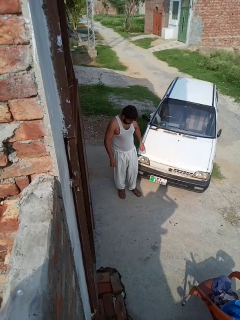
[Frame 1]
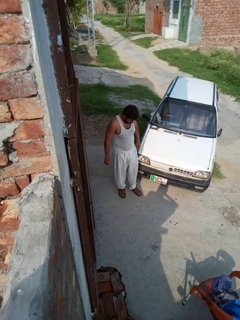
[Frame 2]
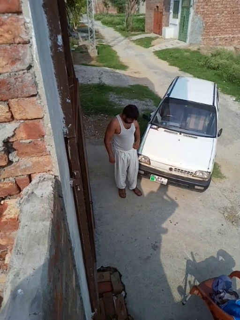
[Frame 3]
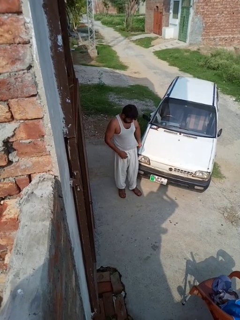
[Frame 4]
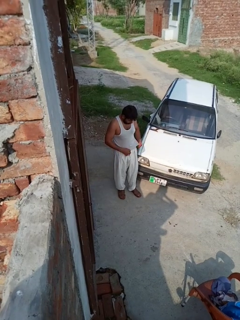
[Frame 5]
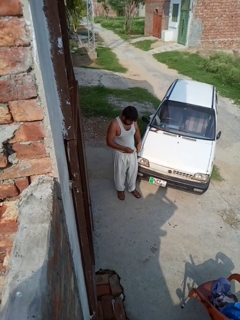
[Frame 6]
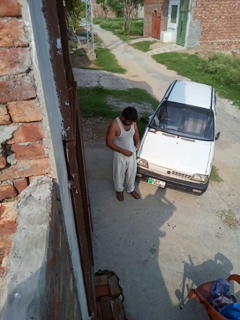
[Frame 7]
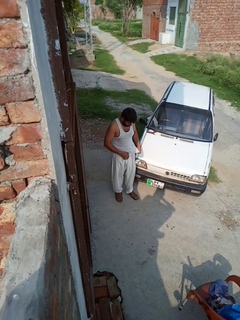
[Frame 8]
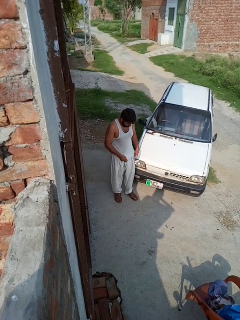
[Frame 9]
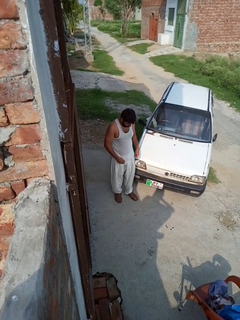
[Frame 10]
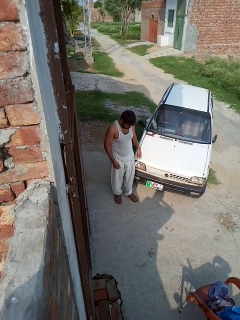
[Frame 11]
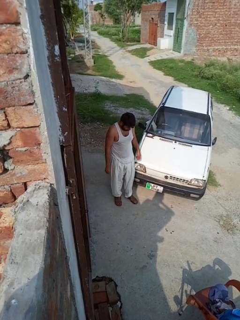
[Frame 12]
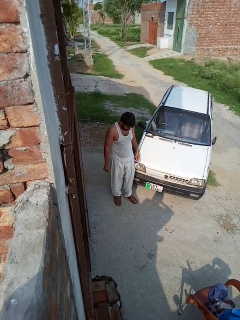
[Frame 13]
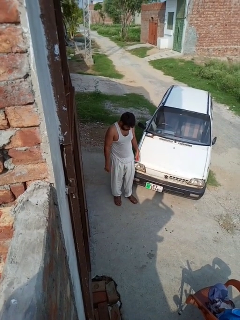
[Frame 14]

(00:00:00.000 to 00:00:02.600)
person untucks shirt

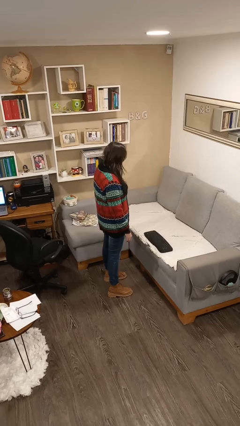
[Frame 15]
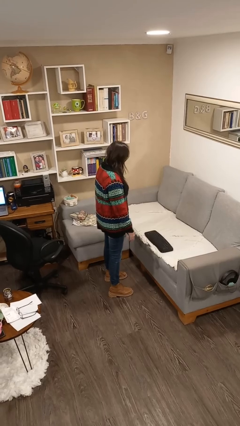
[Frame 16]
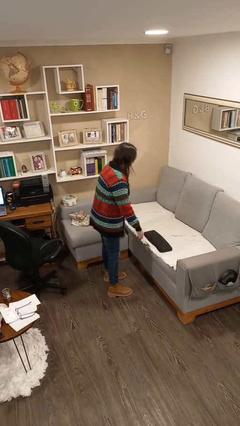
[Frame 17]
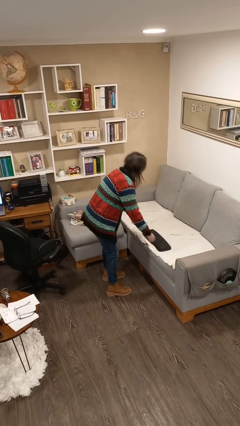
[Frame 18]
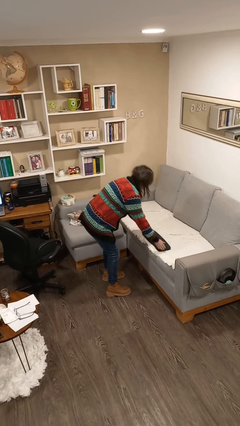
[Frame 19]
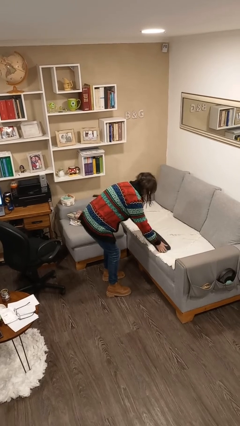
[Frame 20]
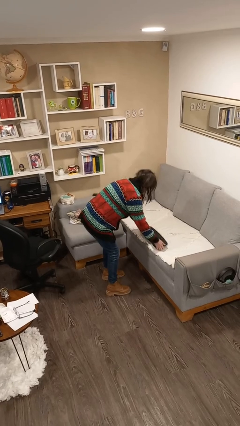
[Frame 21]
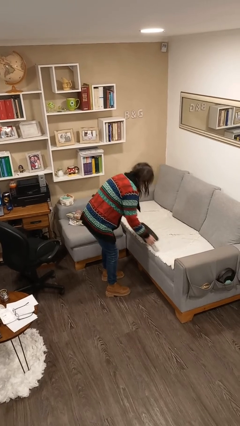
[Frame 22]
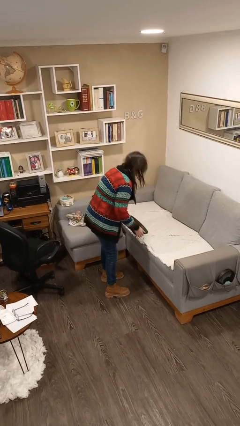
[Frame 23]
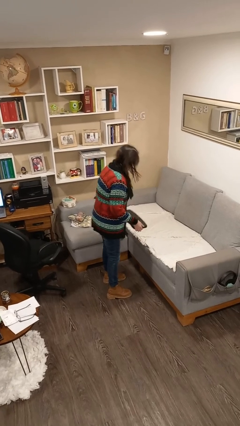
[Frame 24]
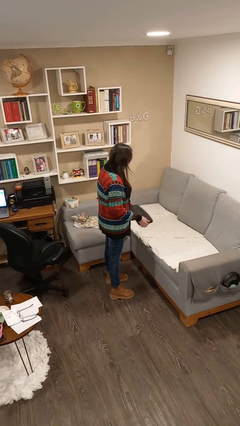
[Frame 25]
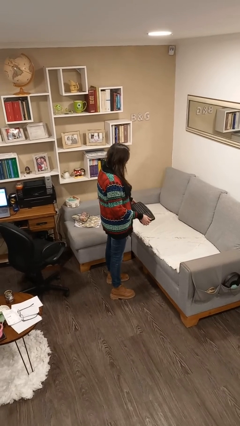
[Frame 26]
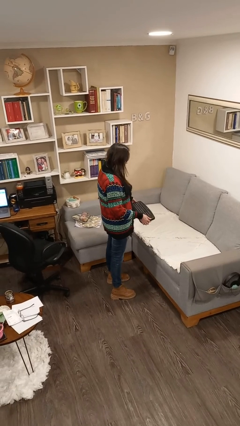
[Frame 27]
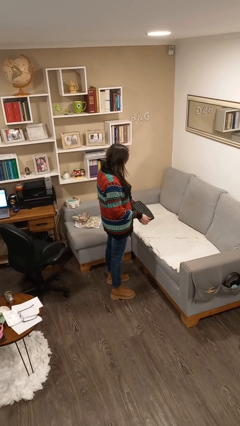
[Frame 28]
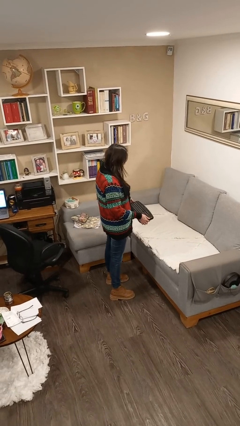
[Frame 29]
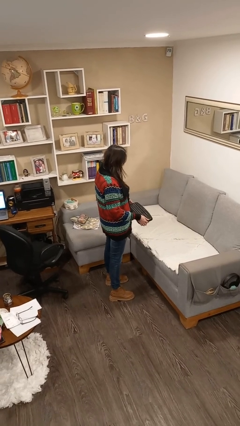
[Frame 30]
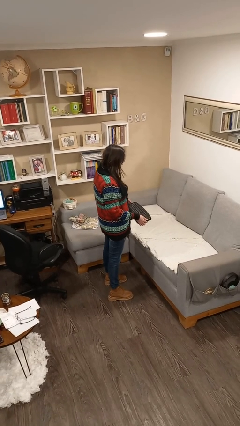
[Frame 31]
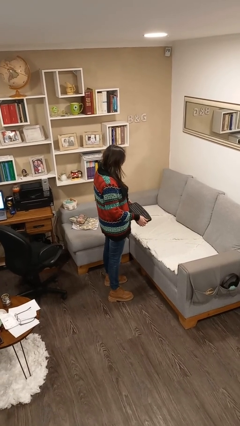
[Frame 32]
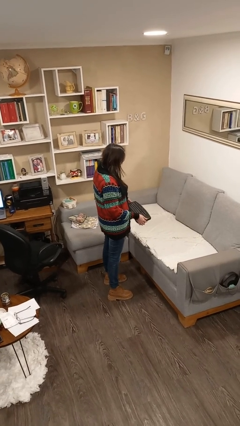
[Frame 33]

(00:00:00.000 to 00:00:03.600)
person picks up object from couch

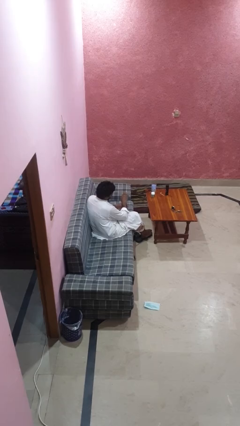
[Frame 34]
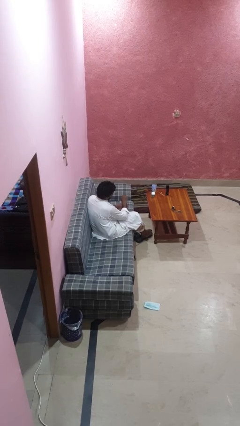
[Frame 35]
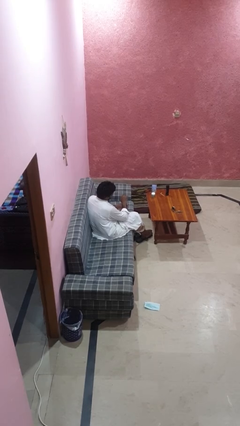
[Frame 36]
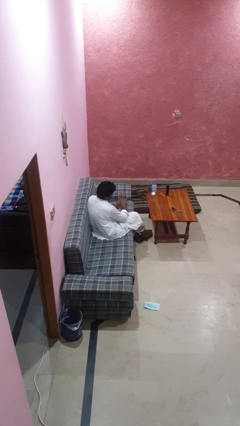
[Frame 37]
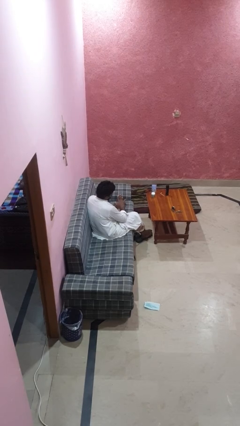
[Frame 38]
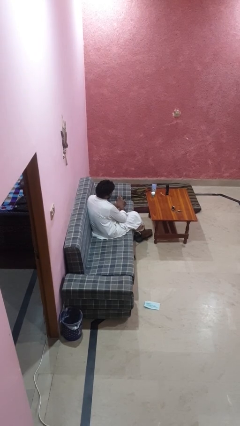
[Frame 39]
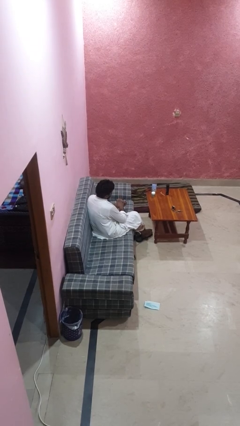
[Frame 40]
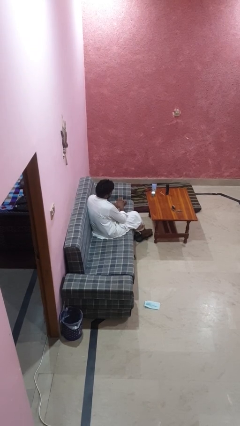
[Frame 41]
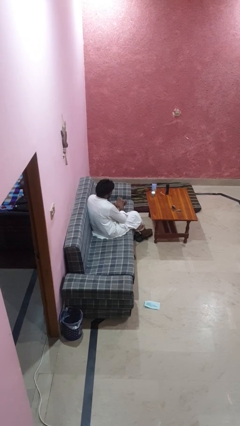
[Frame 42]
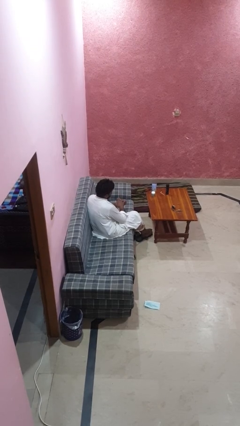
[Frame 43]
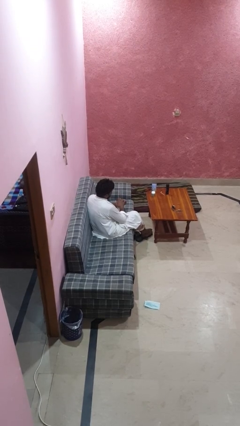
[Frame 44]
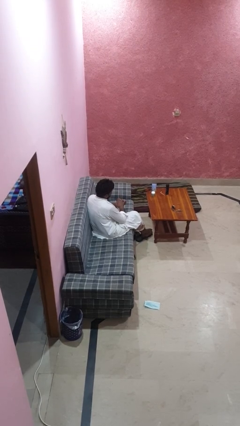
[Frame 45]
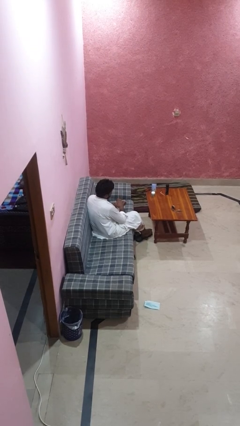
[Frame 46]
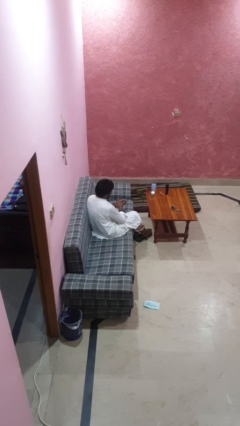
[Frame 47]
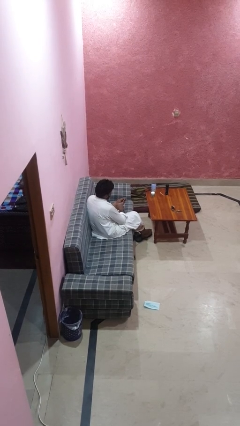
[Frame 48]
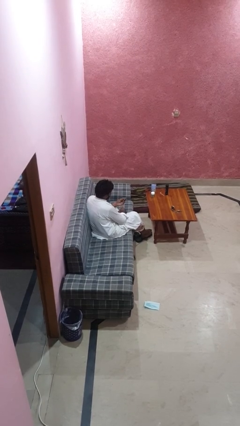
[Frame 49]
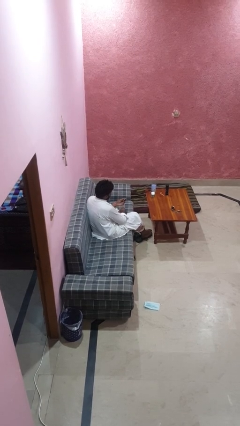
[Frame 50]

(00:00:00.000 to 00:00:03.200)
person takes off ring

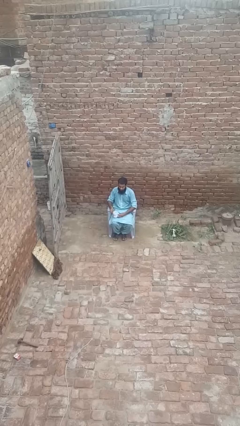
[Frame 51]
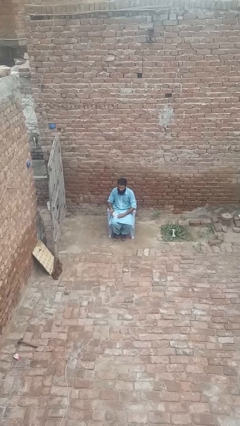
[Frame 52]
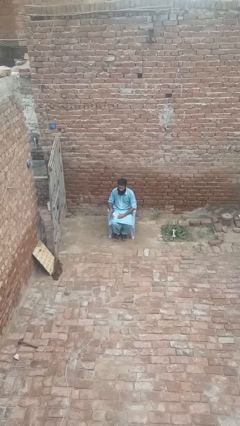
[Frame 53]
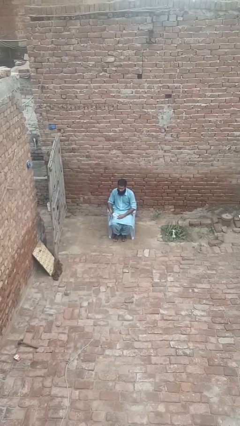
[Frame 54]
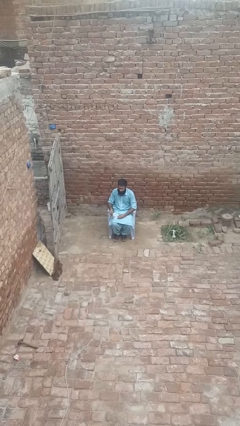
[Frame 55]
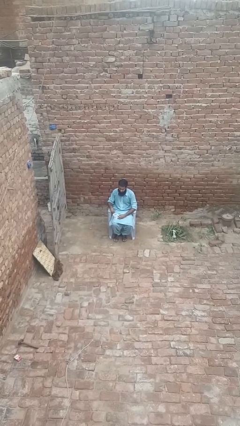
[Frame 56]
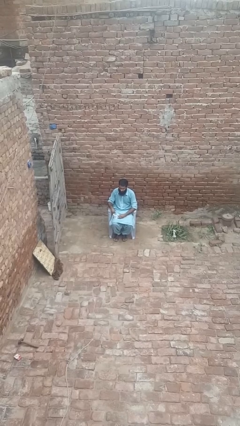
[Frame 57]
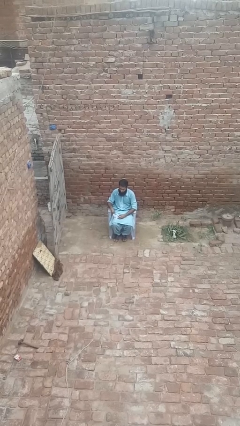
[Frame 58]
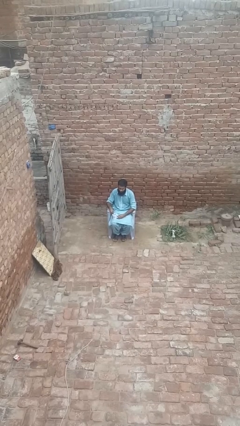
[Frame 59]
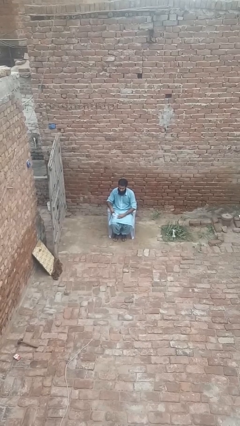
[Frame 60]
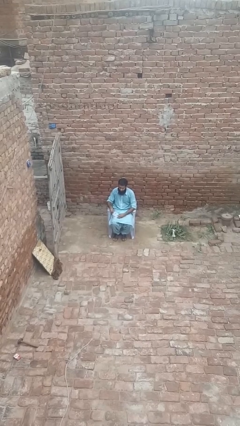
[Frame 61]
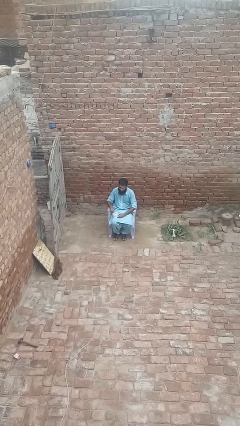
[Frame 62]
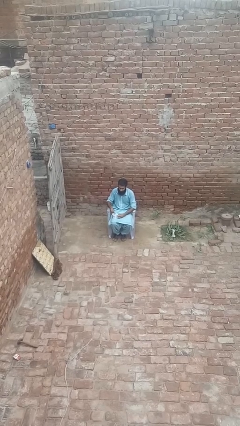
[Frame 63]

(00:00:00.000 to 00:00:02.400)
person stirs mug

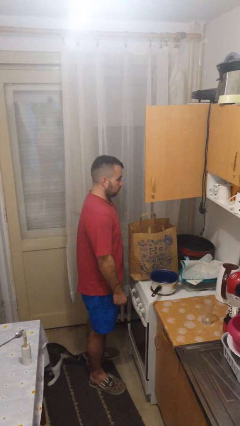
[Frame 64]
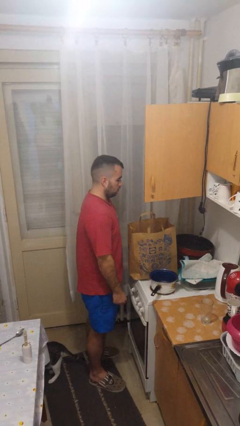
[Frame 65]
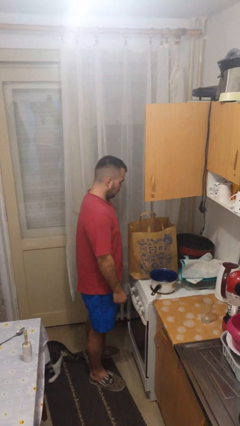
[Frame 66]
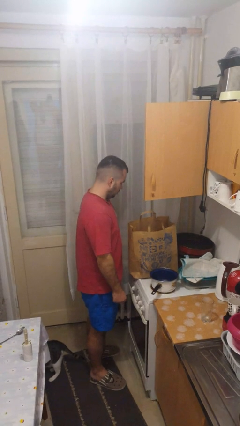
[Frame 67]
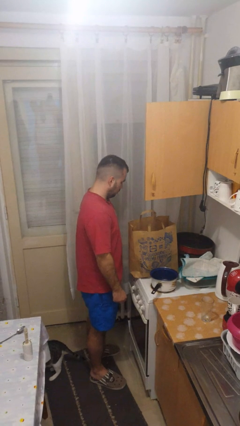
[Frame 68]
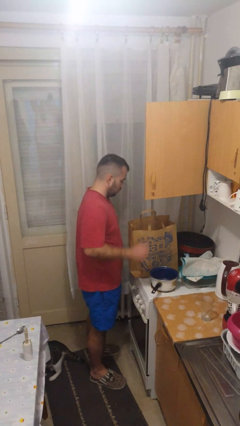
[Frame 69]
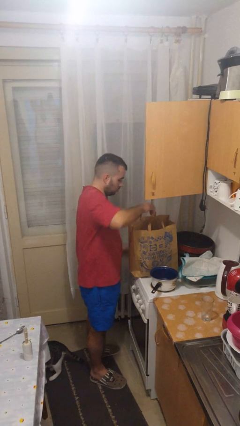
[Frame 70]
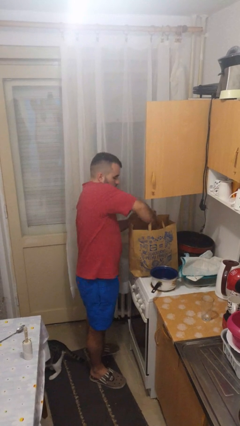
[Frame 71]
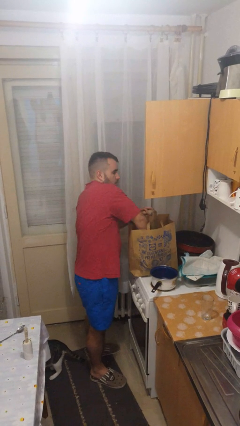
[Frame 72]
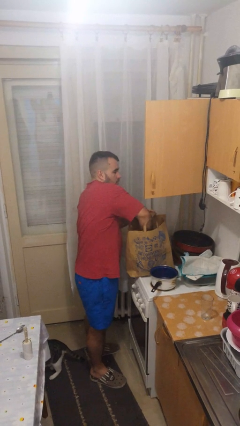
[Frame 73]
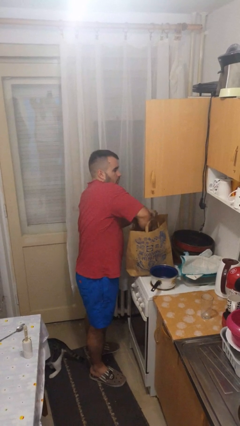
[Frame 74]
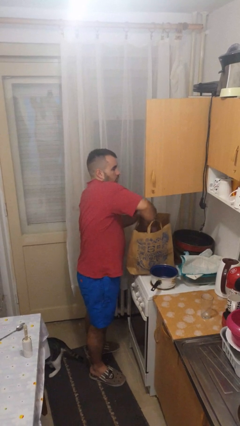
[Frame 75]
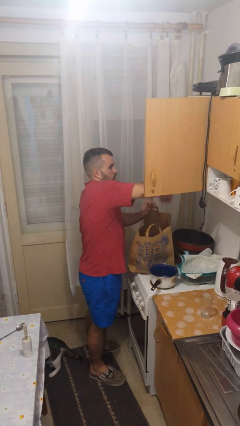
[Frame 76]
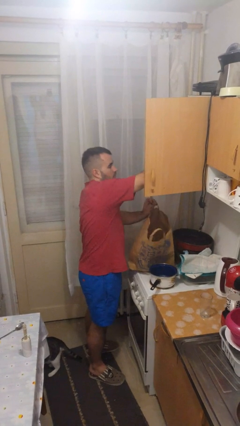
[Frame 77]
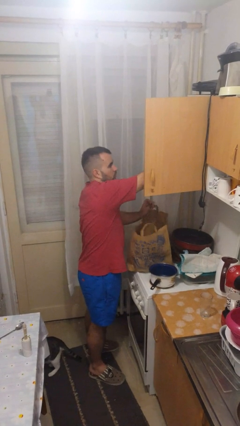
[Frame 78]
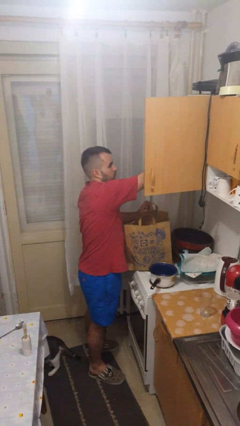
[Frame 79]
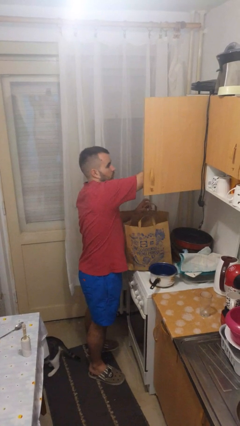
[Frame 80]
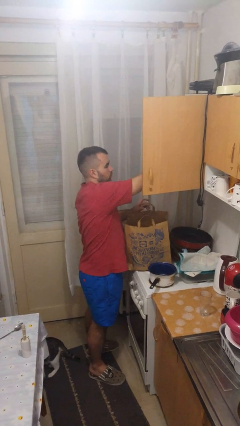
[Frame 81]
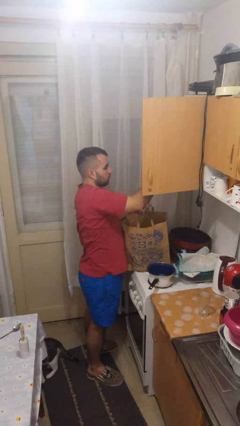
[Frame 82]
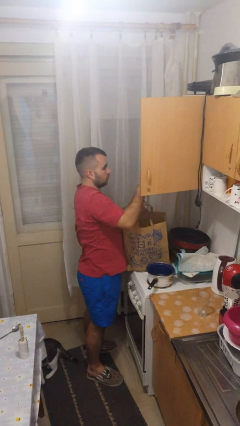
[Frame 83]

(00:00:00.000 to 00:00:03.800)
person loads groceries into cabinet

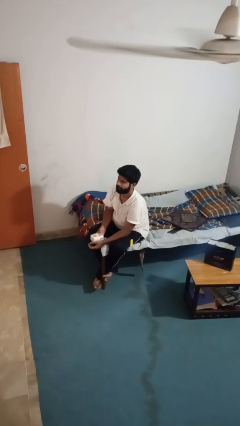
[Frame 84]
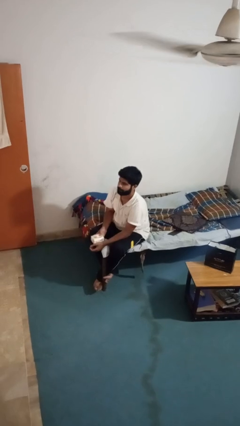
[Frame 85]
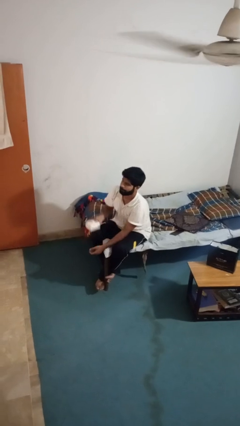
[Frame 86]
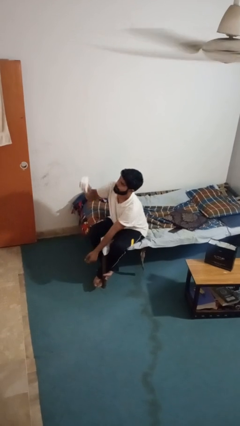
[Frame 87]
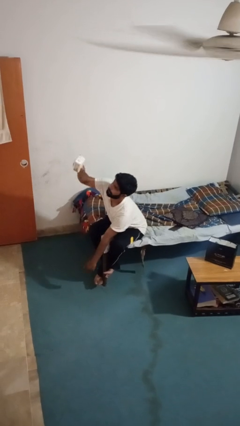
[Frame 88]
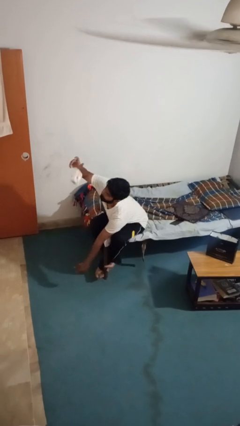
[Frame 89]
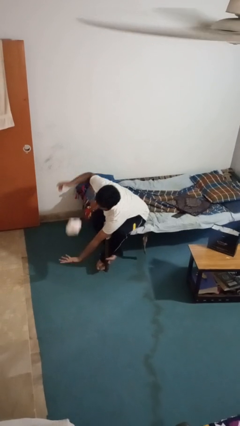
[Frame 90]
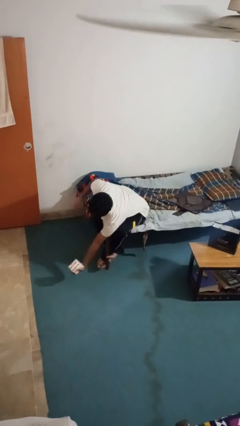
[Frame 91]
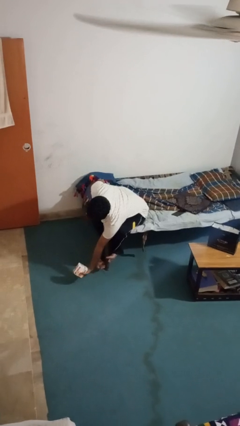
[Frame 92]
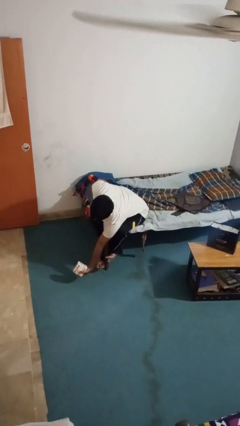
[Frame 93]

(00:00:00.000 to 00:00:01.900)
person drops object

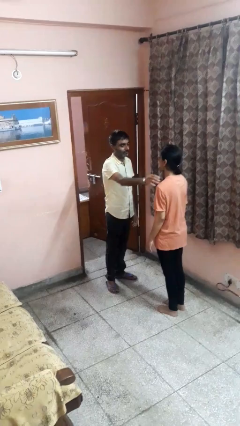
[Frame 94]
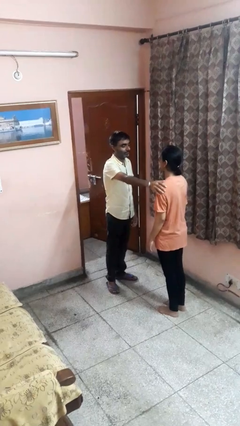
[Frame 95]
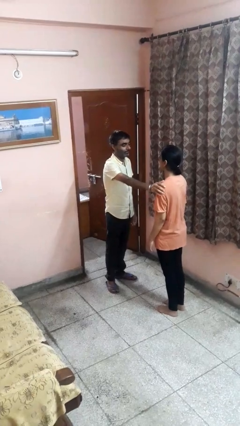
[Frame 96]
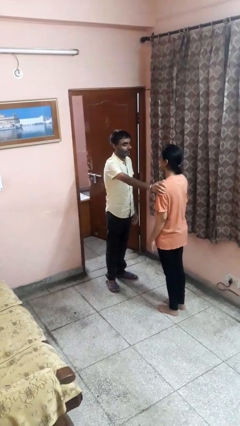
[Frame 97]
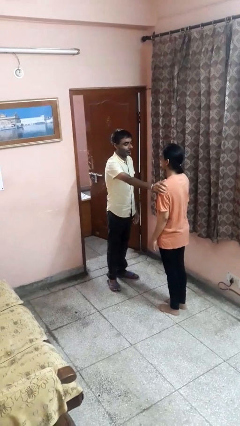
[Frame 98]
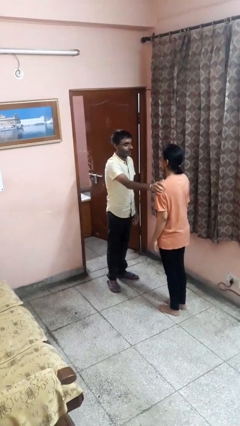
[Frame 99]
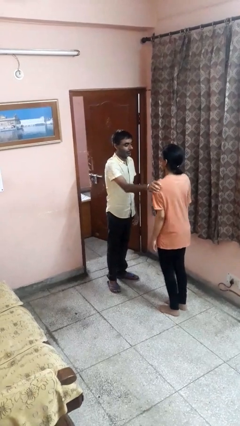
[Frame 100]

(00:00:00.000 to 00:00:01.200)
person grabs person by shoulder
